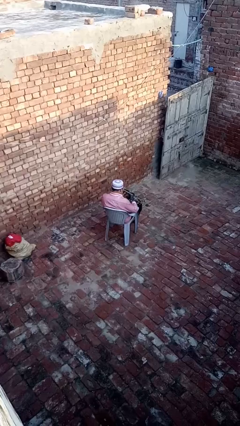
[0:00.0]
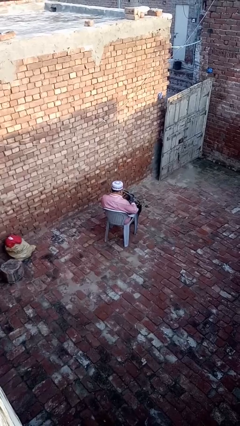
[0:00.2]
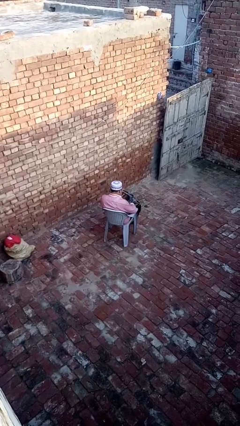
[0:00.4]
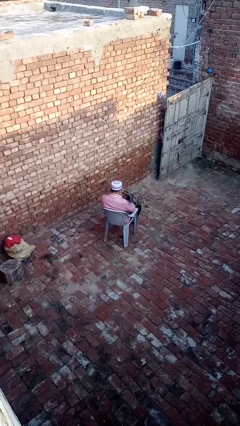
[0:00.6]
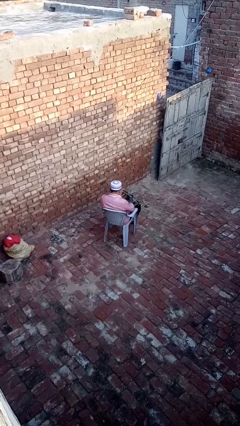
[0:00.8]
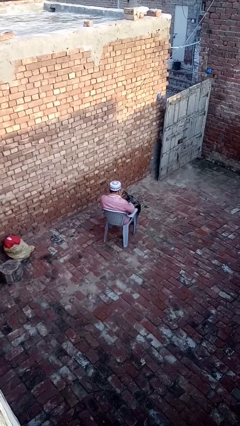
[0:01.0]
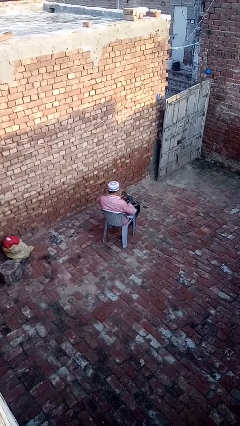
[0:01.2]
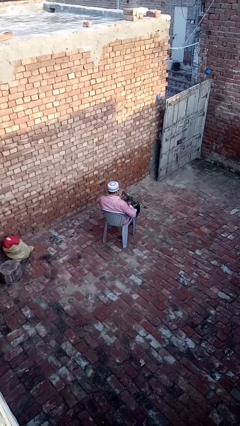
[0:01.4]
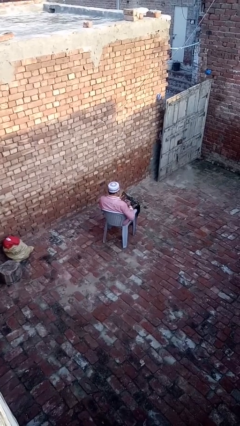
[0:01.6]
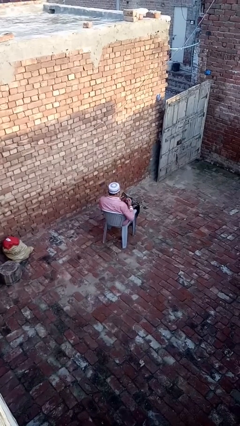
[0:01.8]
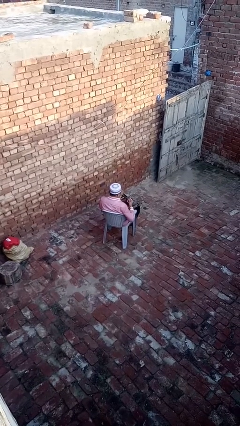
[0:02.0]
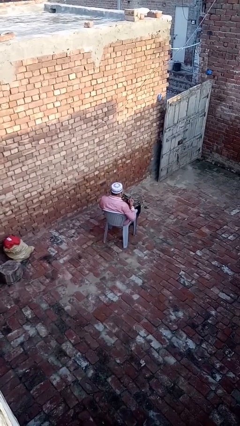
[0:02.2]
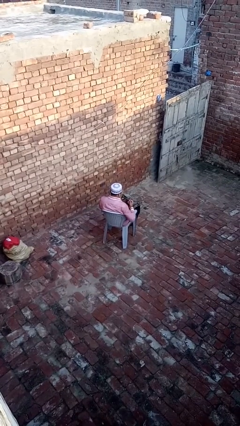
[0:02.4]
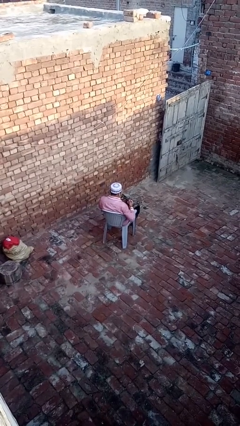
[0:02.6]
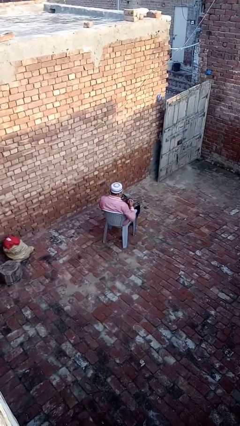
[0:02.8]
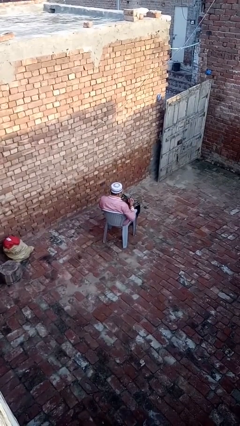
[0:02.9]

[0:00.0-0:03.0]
person takes object from purse

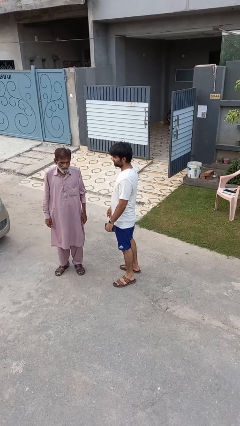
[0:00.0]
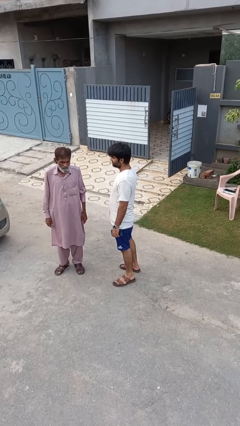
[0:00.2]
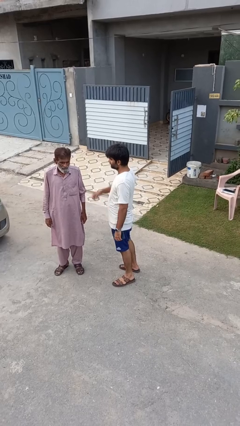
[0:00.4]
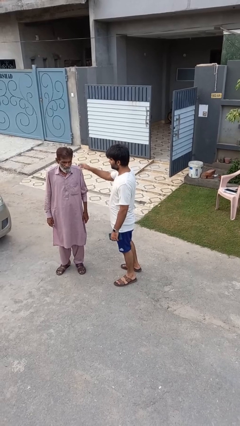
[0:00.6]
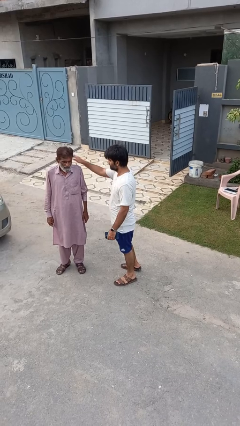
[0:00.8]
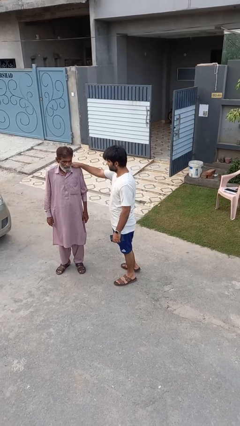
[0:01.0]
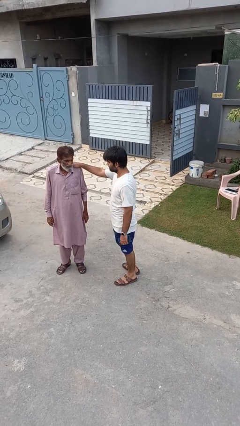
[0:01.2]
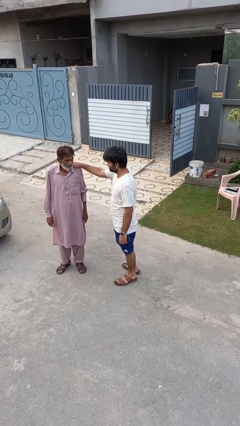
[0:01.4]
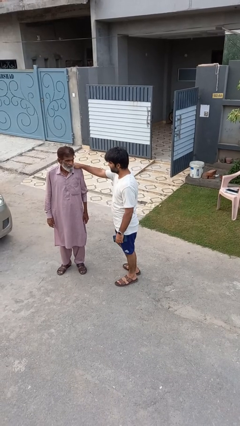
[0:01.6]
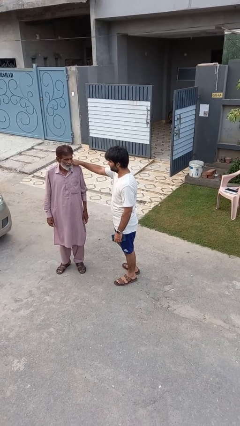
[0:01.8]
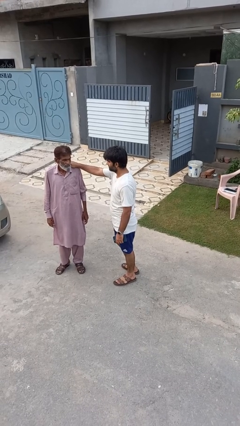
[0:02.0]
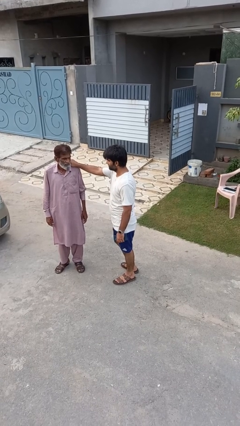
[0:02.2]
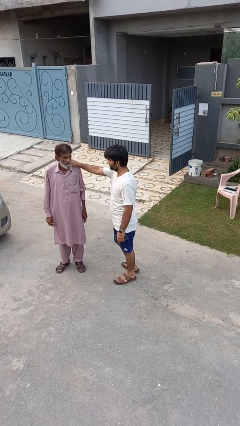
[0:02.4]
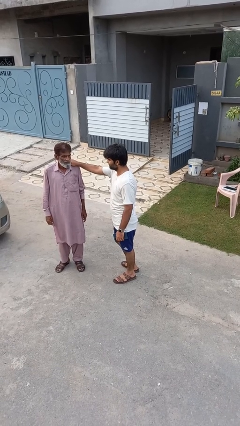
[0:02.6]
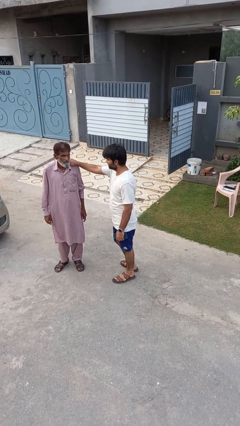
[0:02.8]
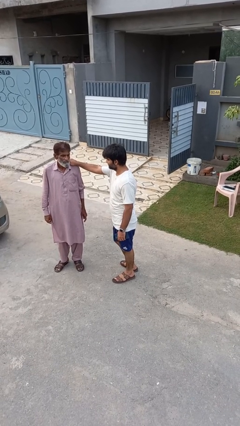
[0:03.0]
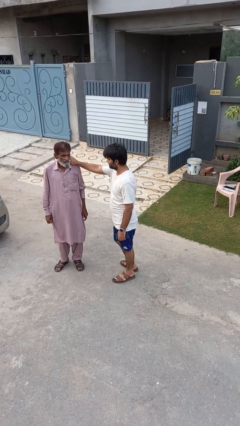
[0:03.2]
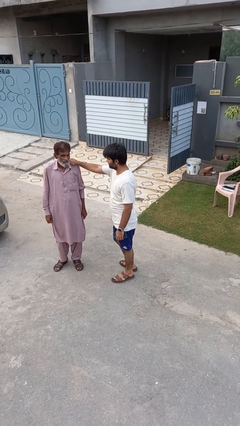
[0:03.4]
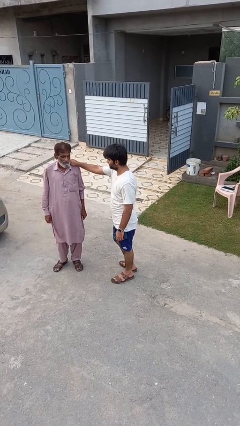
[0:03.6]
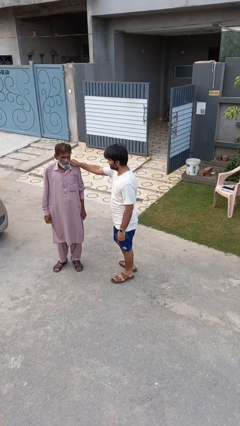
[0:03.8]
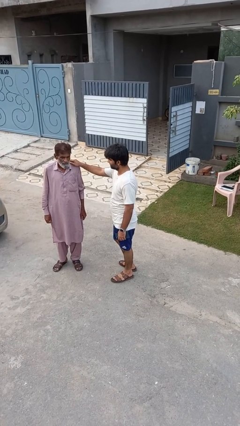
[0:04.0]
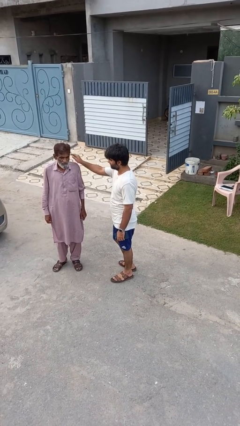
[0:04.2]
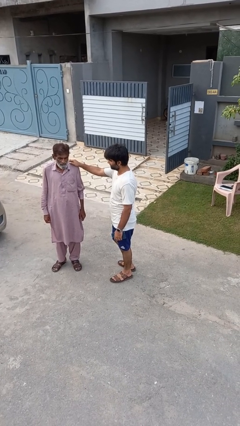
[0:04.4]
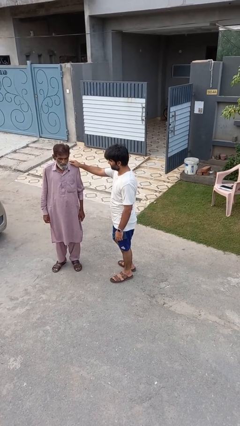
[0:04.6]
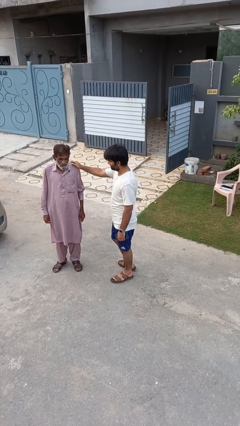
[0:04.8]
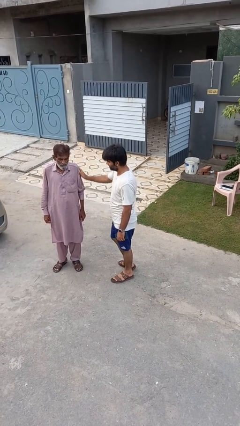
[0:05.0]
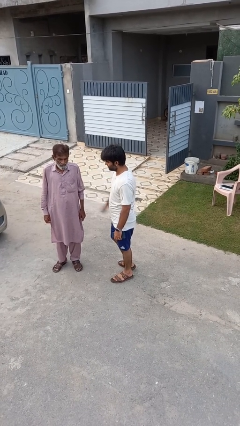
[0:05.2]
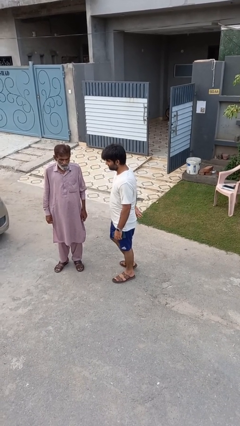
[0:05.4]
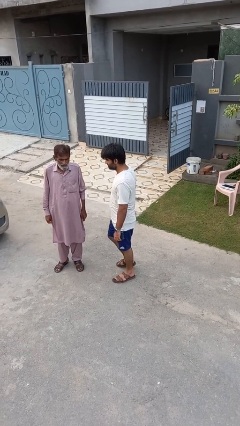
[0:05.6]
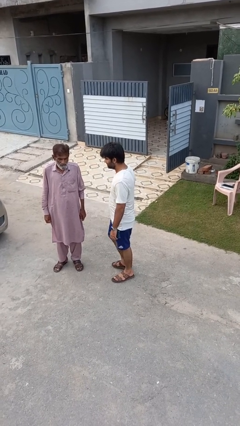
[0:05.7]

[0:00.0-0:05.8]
person pounds shoulders of person

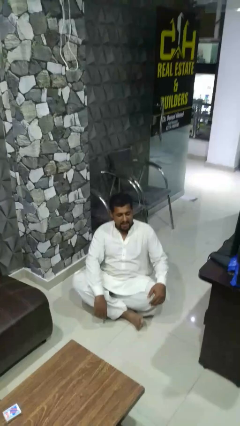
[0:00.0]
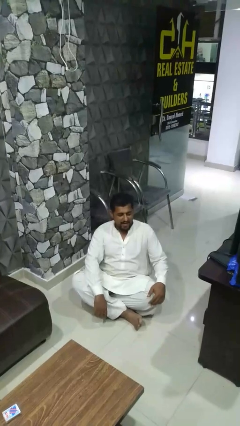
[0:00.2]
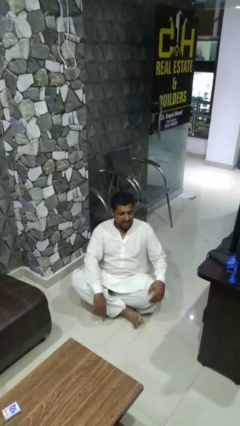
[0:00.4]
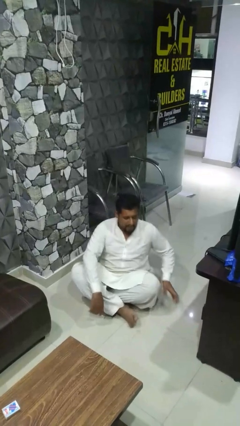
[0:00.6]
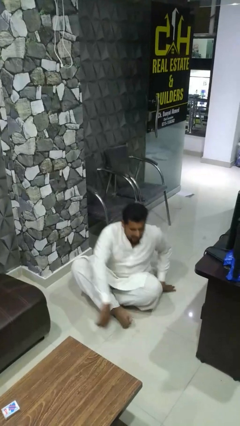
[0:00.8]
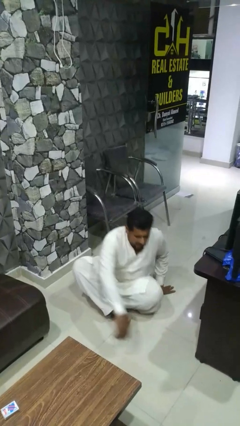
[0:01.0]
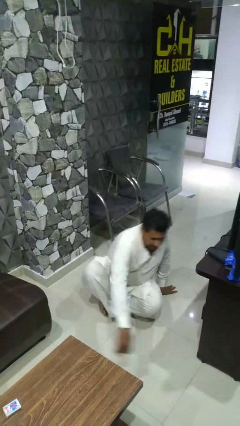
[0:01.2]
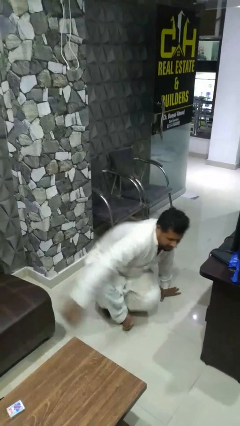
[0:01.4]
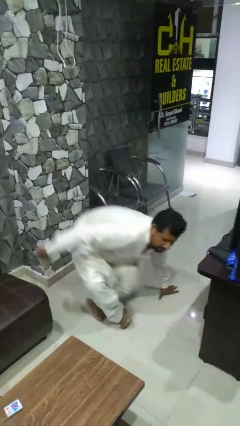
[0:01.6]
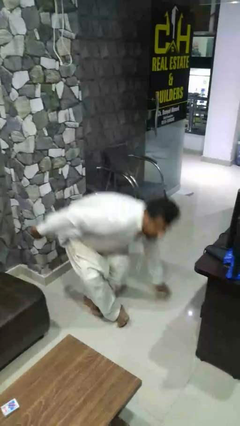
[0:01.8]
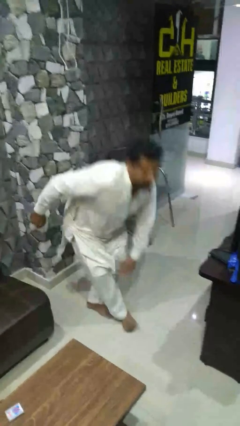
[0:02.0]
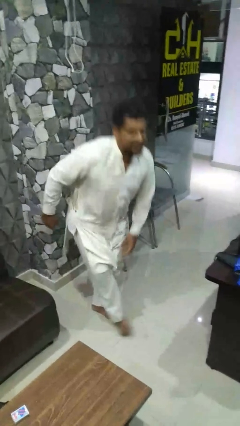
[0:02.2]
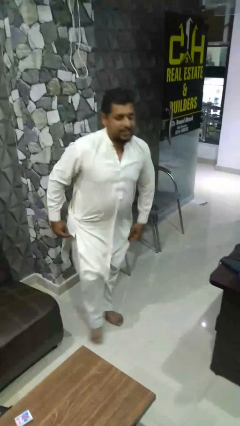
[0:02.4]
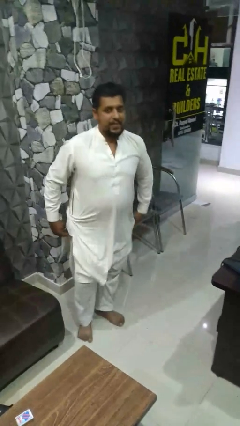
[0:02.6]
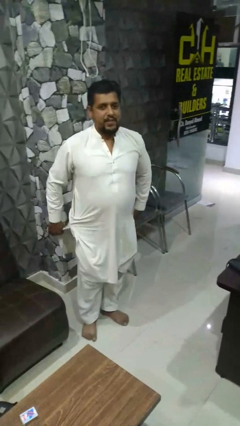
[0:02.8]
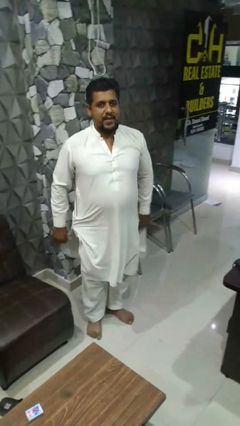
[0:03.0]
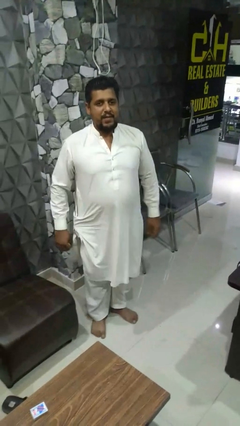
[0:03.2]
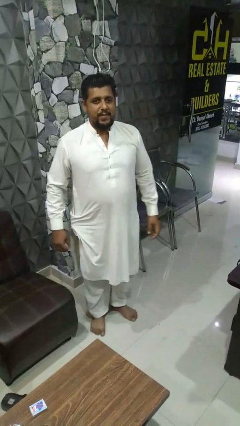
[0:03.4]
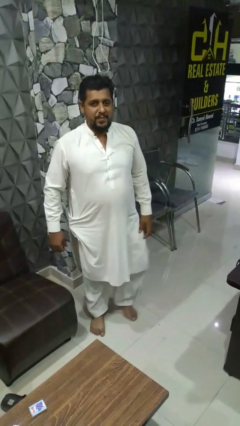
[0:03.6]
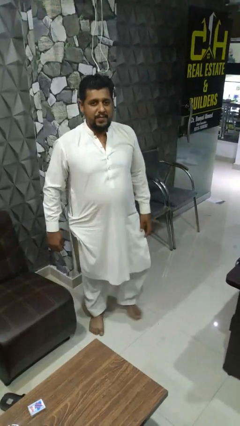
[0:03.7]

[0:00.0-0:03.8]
person stands up from floor

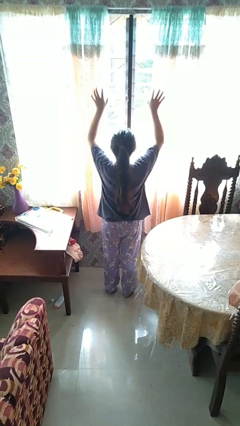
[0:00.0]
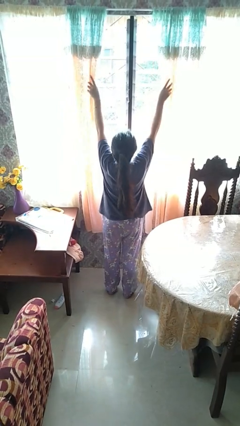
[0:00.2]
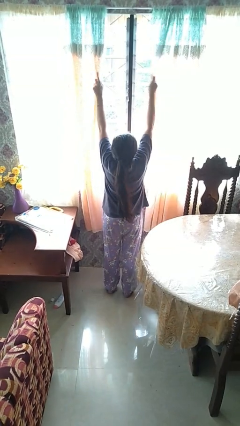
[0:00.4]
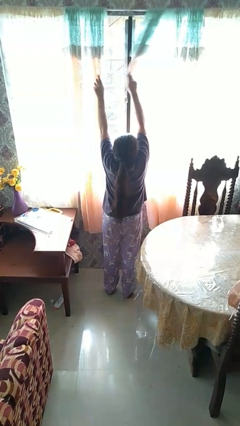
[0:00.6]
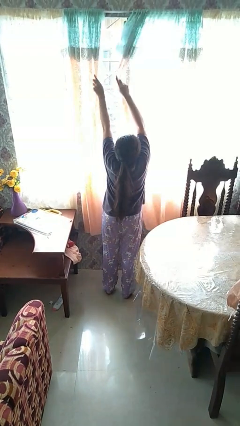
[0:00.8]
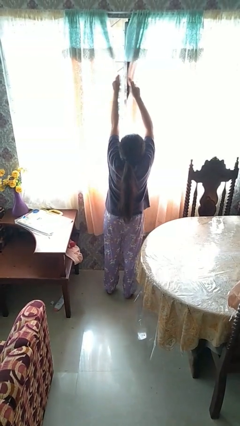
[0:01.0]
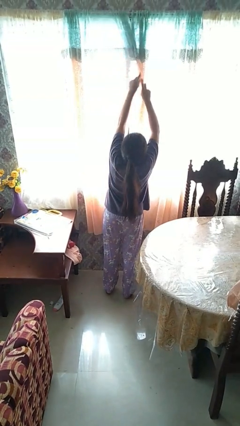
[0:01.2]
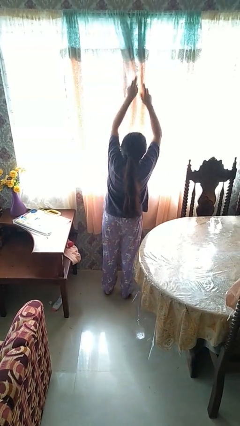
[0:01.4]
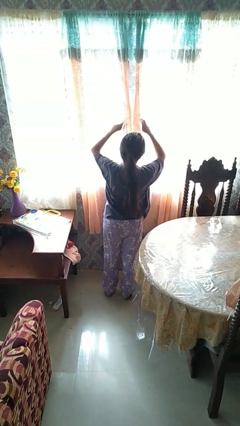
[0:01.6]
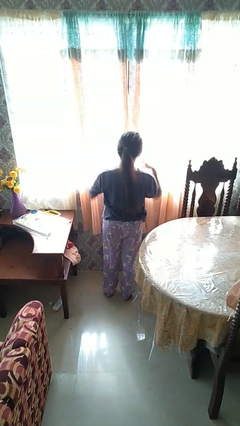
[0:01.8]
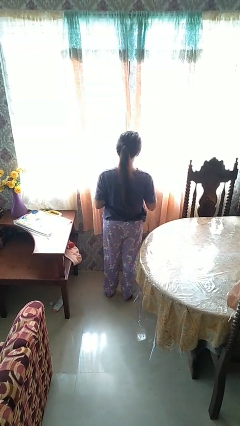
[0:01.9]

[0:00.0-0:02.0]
person closes curtains

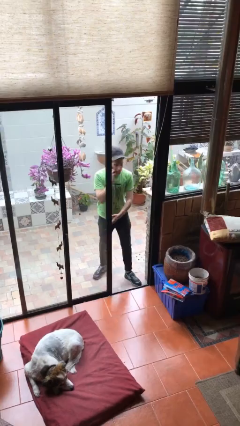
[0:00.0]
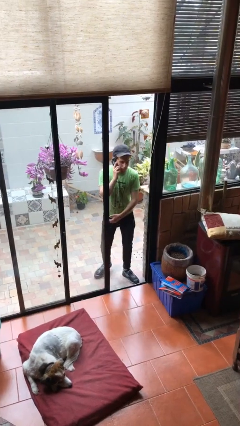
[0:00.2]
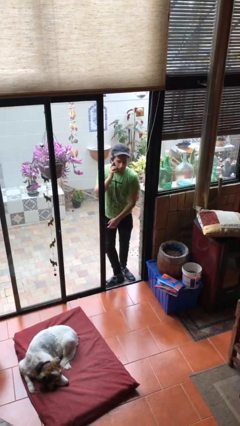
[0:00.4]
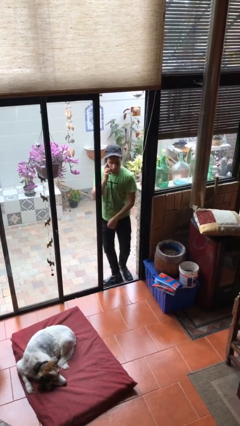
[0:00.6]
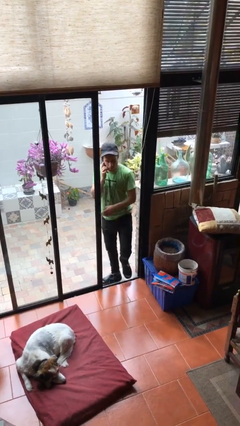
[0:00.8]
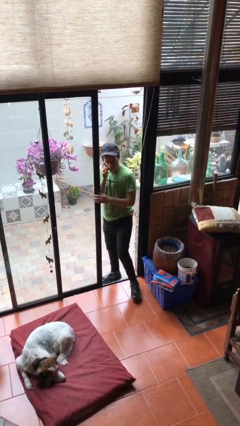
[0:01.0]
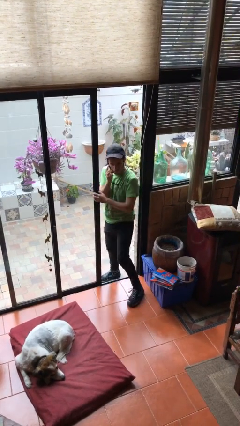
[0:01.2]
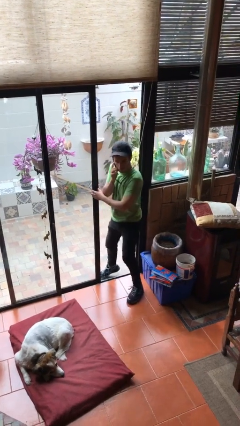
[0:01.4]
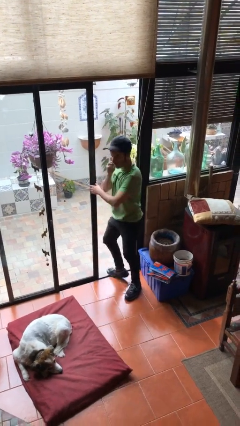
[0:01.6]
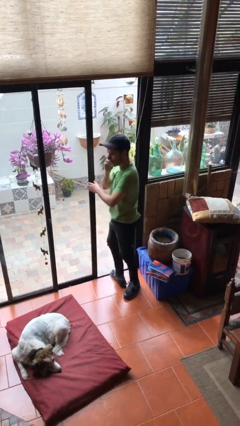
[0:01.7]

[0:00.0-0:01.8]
person enters scene through structure

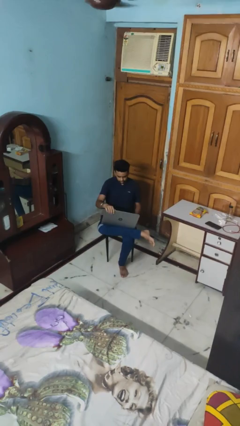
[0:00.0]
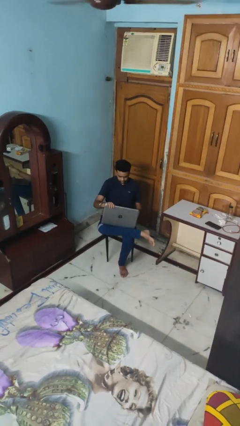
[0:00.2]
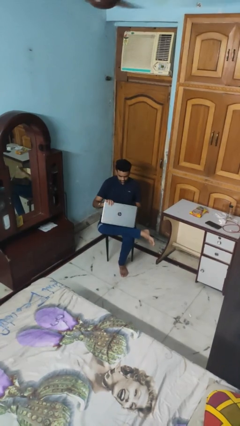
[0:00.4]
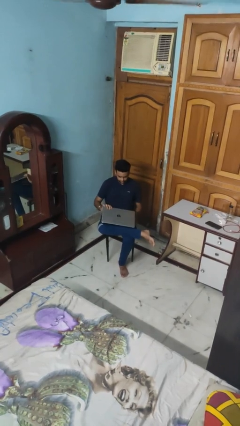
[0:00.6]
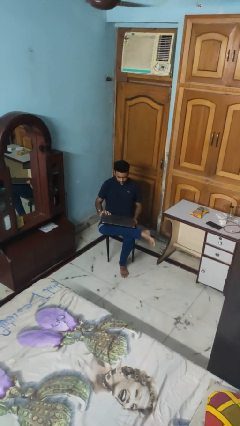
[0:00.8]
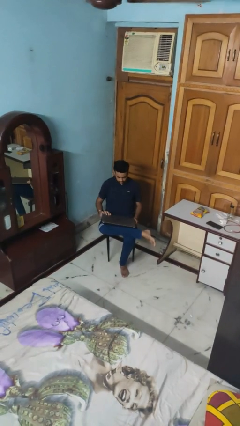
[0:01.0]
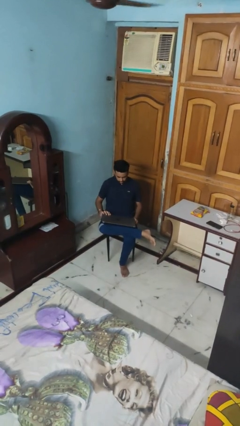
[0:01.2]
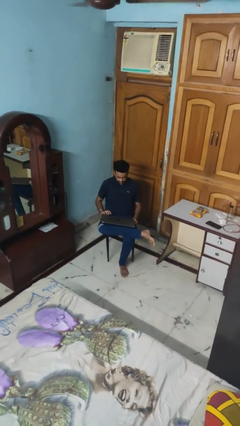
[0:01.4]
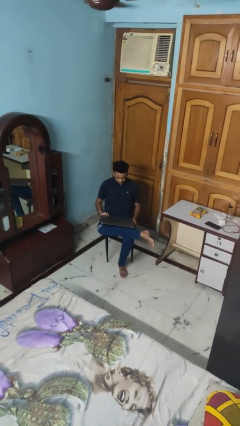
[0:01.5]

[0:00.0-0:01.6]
person closes laptop
